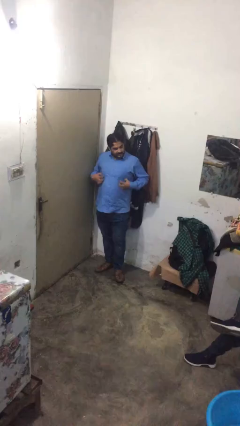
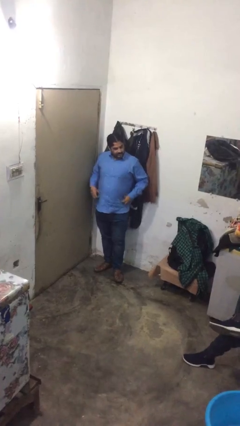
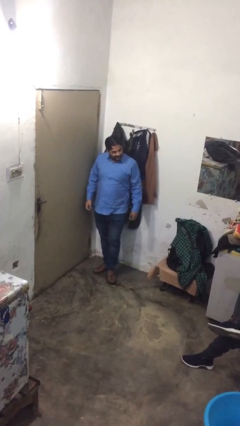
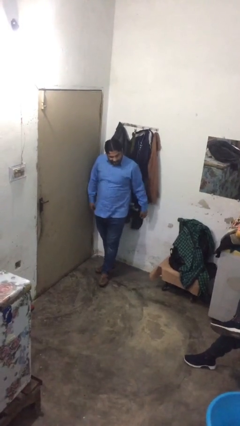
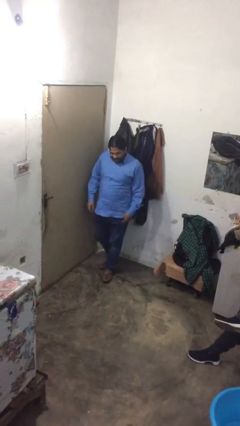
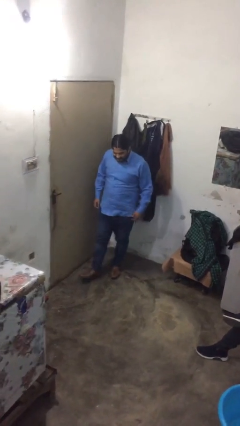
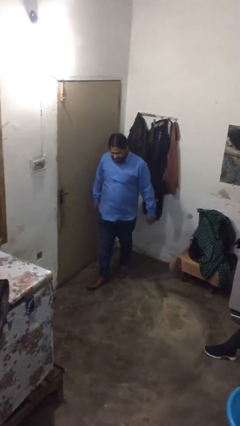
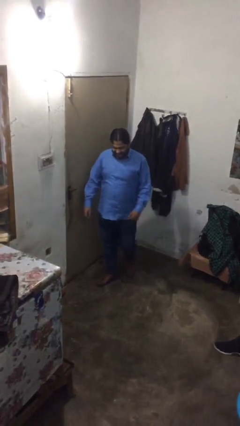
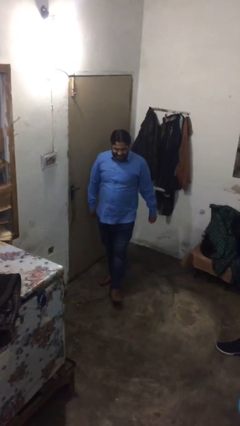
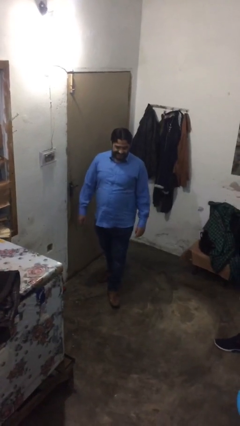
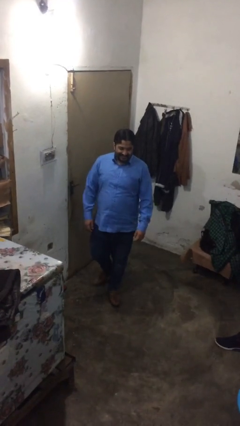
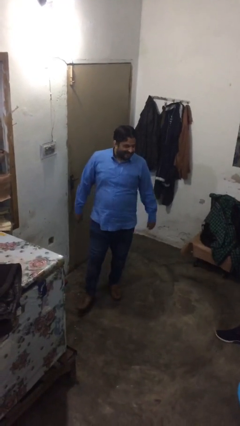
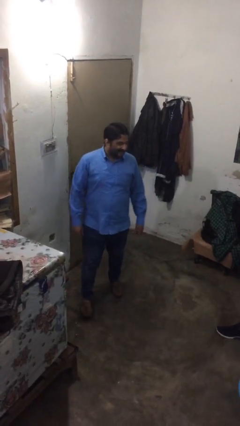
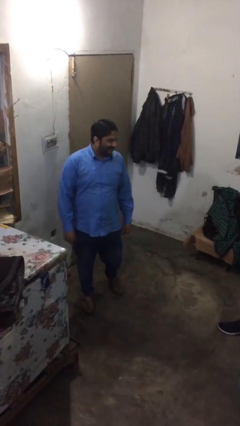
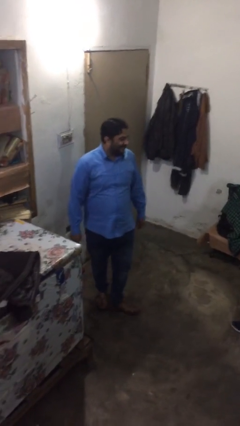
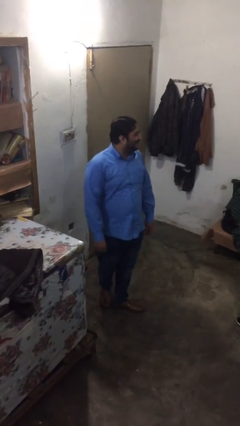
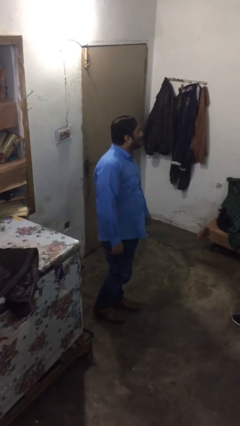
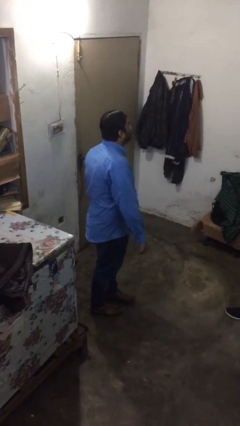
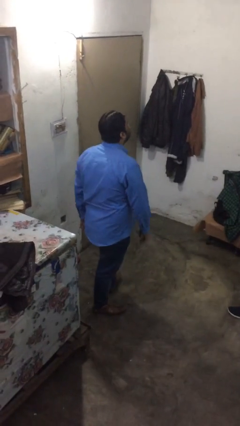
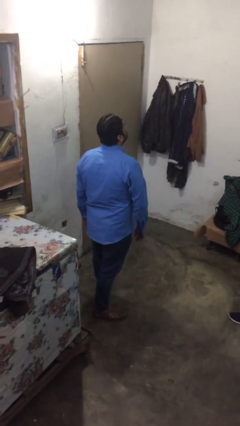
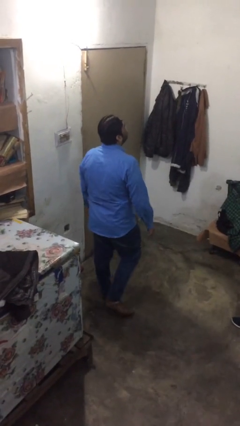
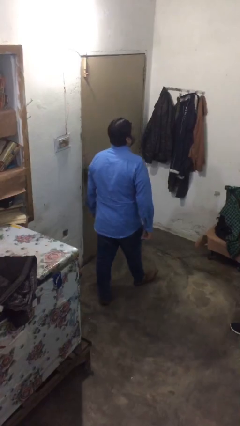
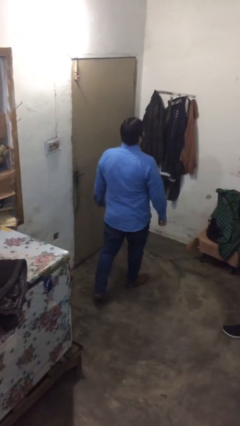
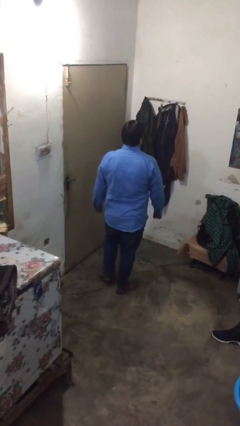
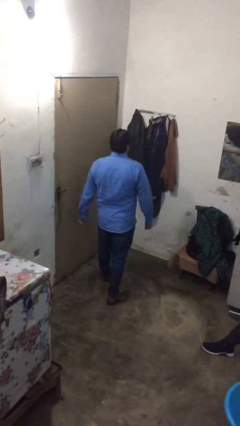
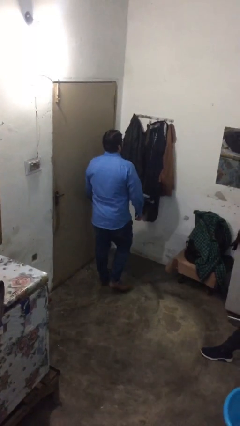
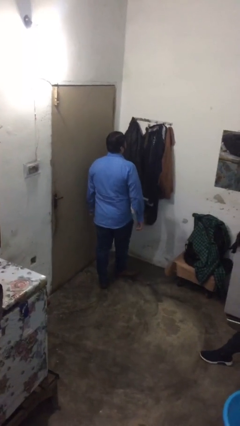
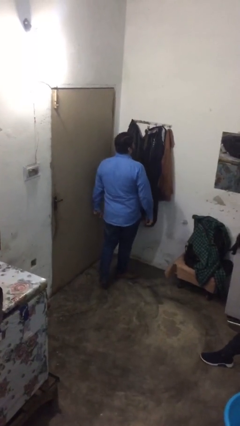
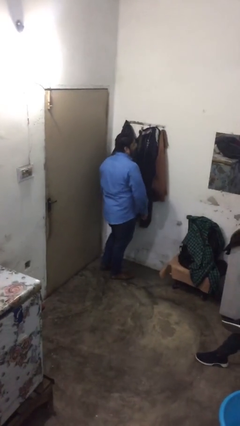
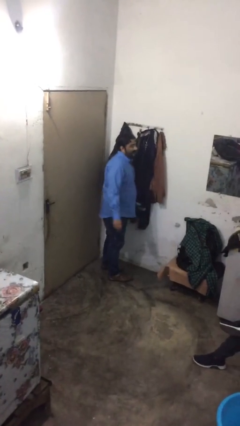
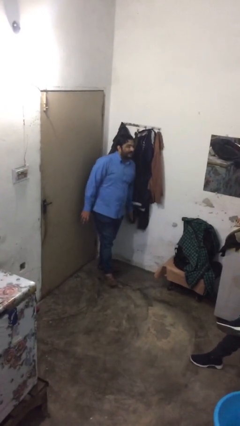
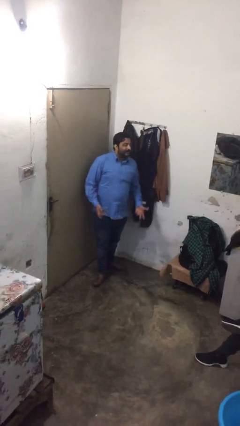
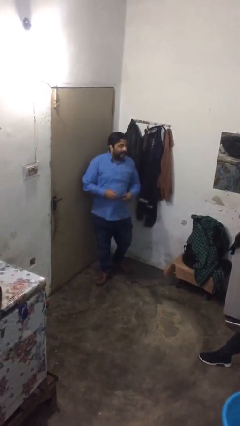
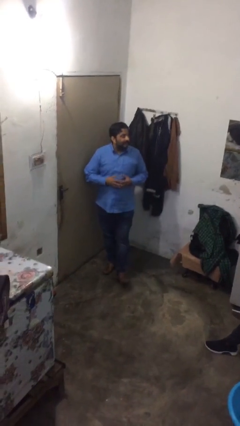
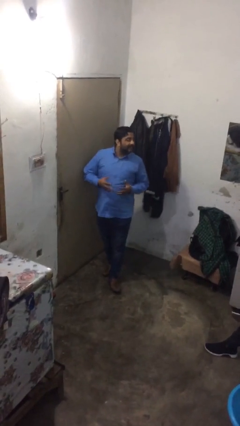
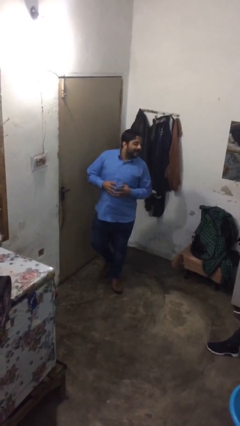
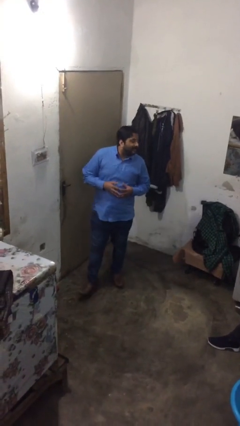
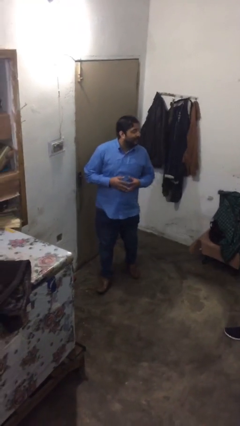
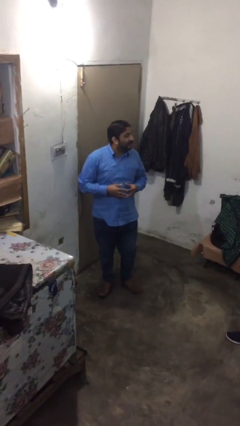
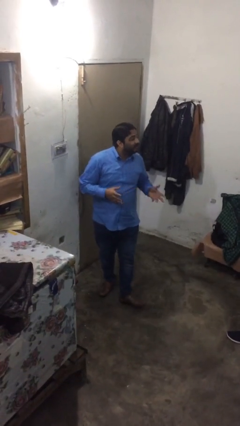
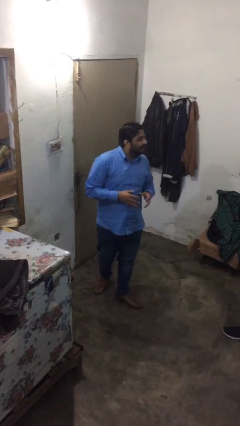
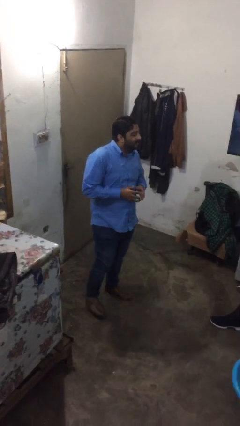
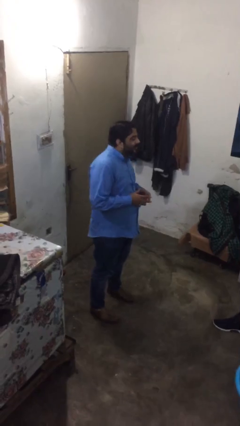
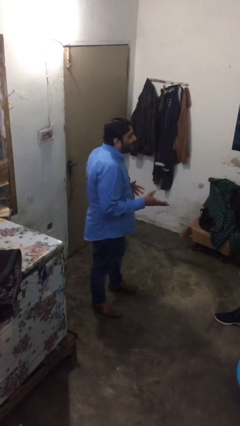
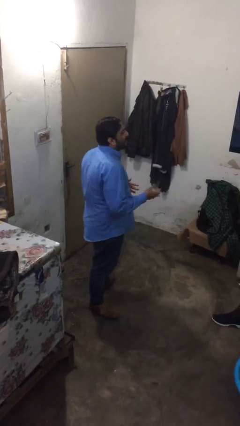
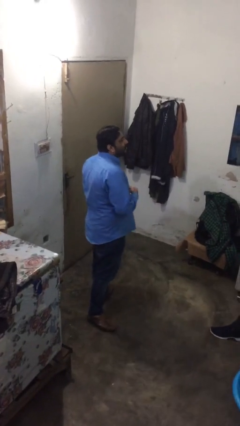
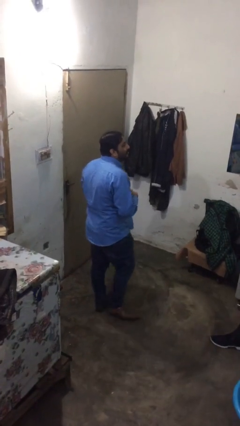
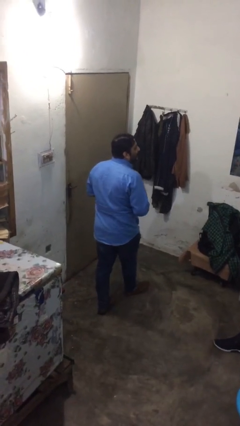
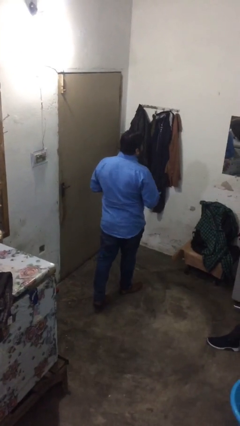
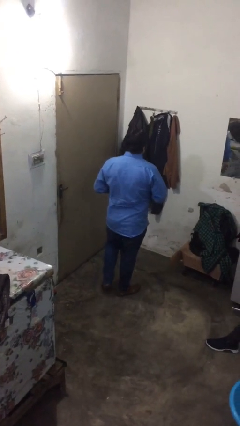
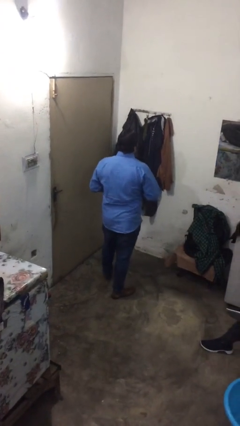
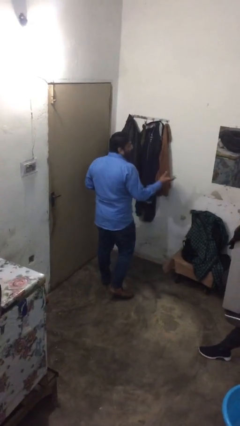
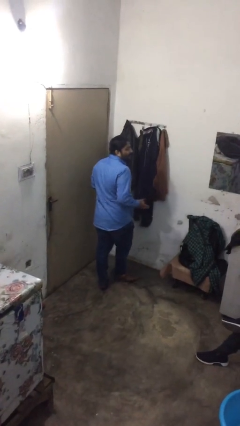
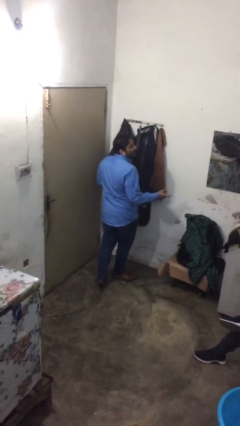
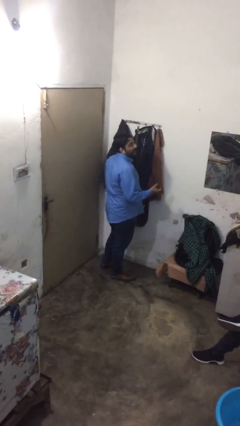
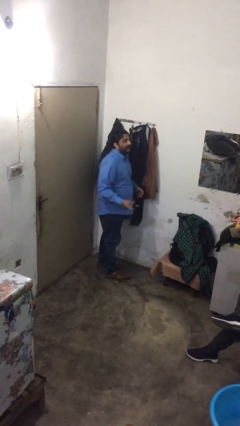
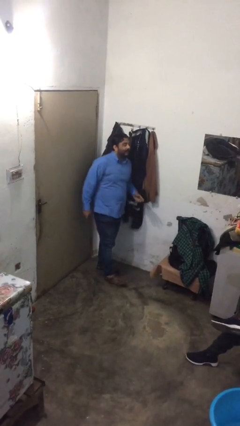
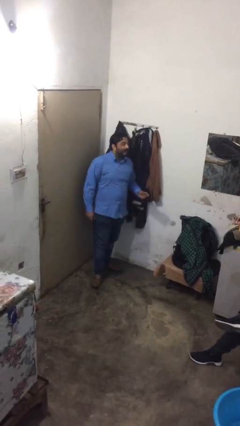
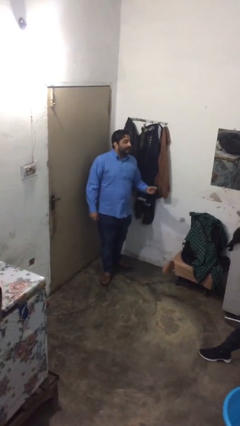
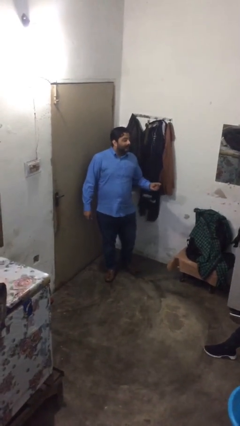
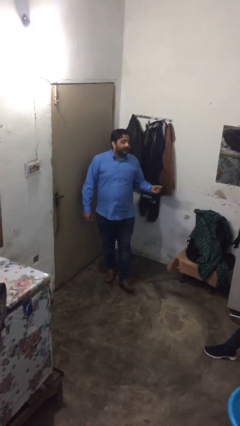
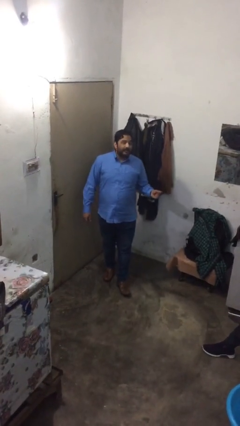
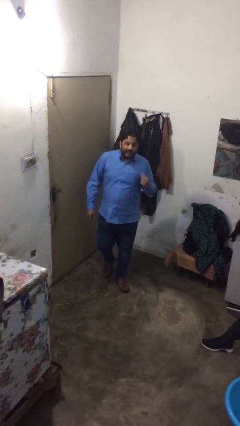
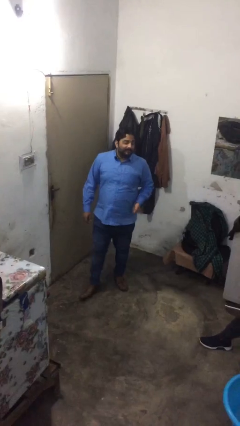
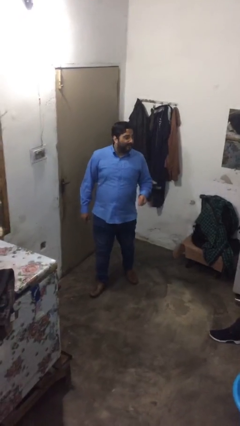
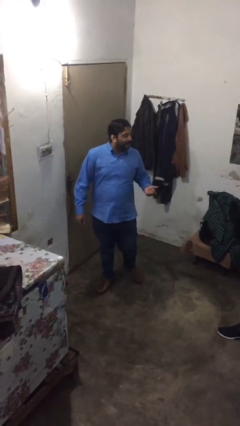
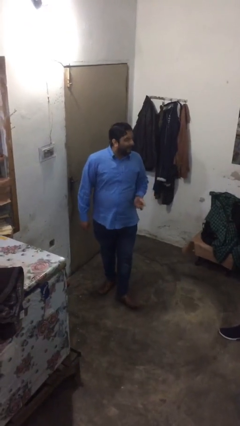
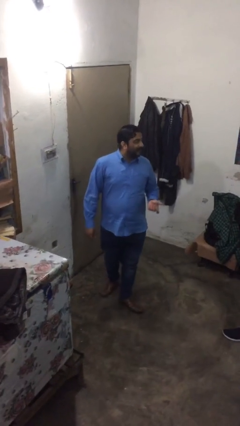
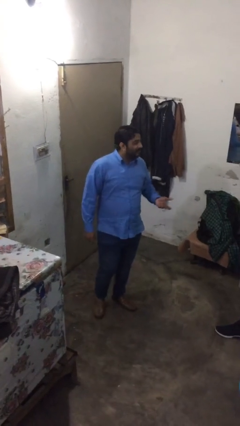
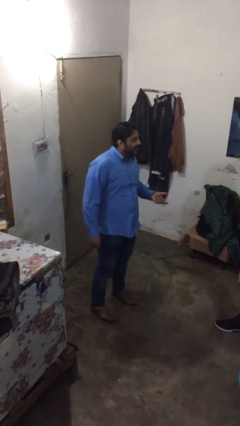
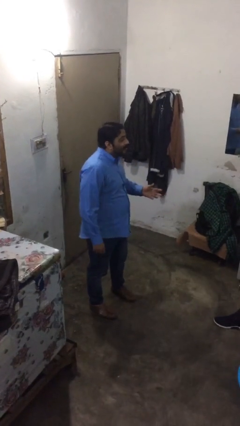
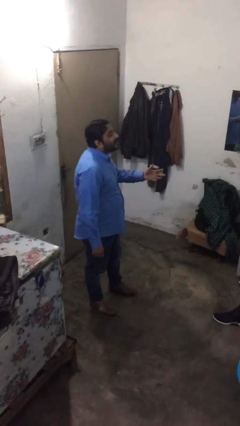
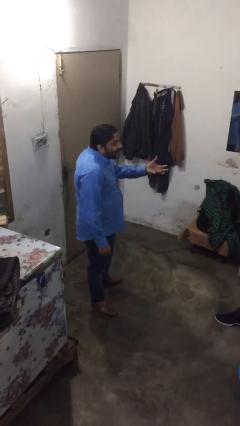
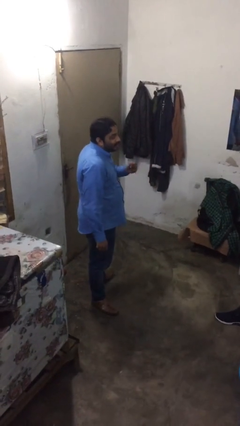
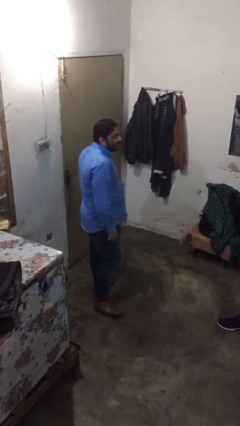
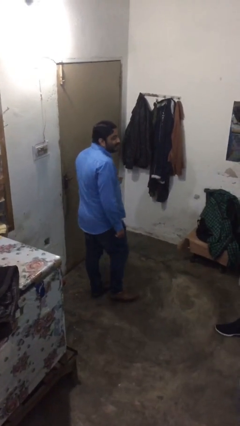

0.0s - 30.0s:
person walks

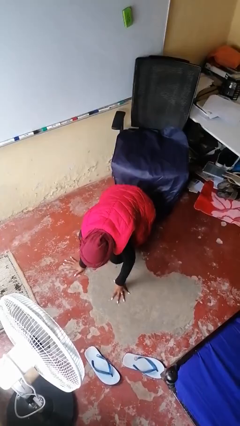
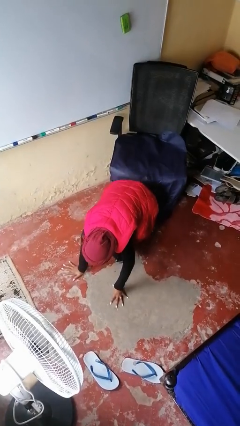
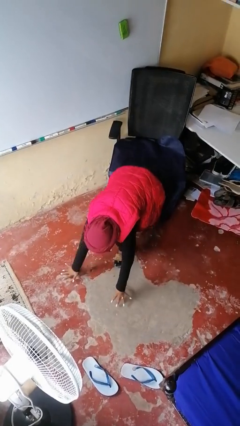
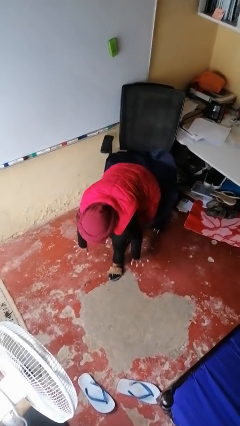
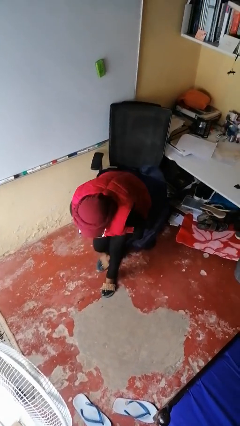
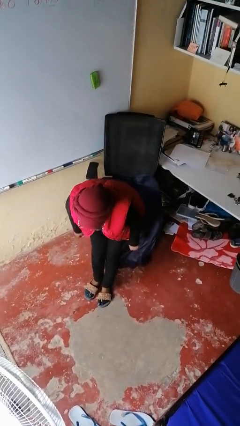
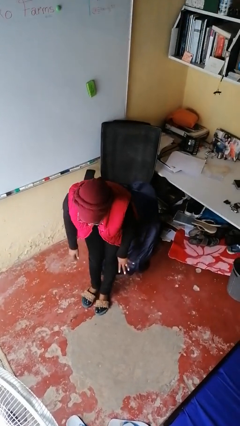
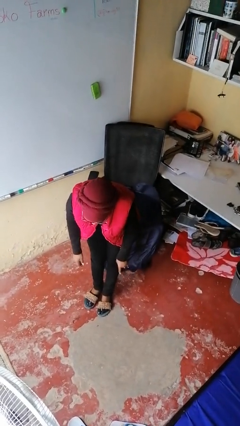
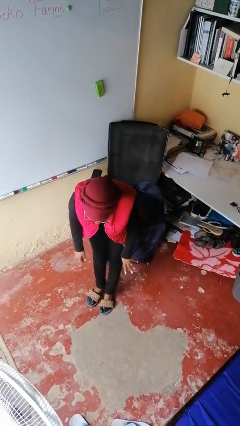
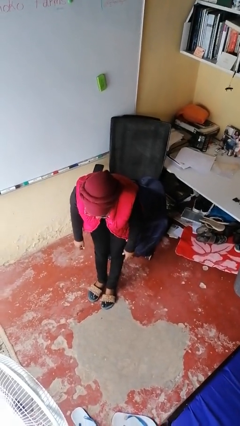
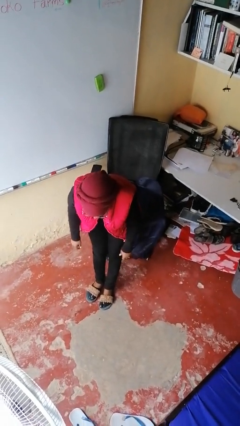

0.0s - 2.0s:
person stands up from floor

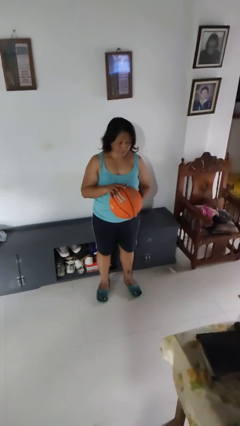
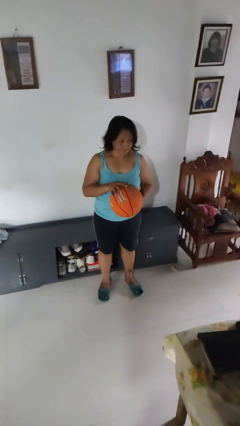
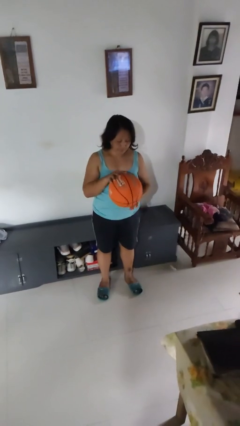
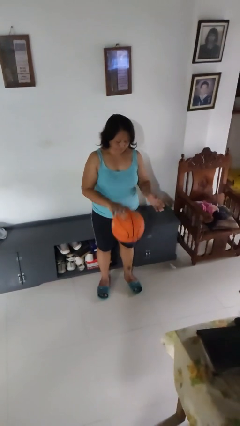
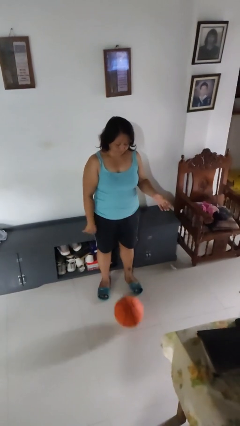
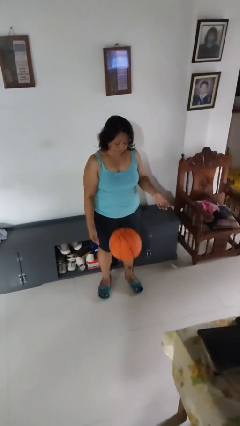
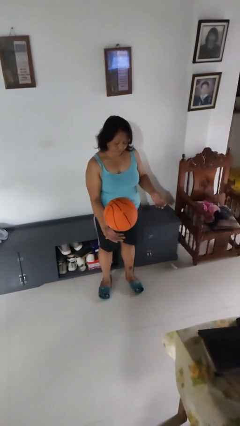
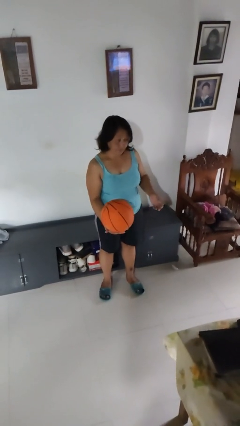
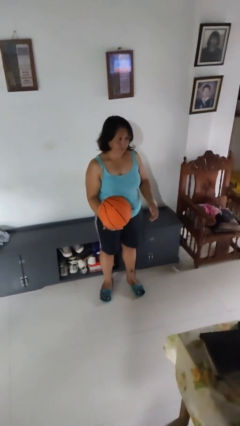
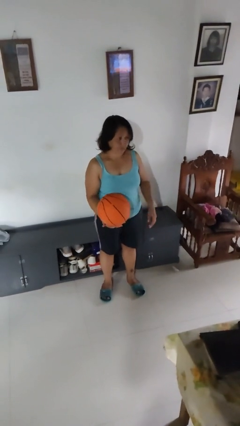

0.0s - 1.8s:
person bounces ball on floor
